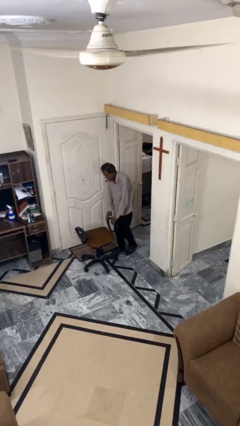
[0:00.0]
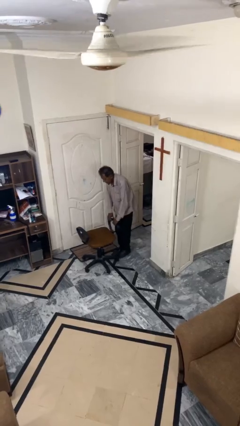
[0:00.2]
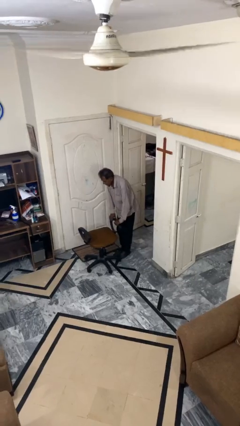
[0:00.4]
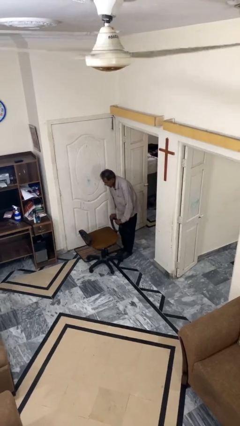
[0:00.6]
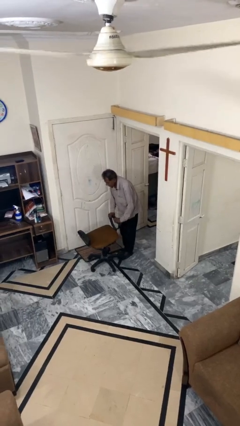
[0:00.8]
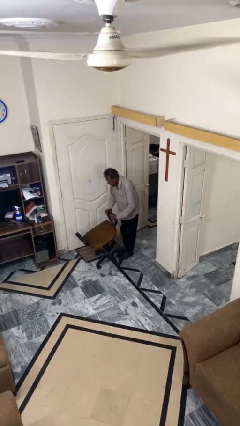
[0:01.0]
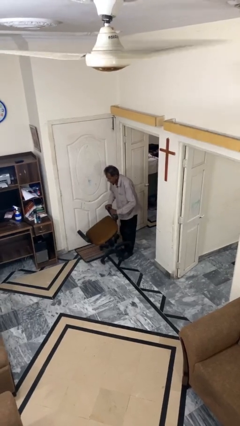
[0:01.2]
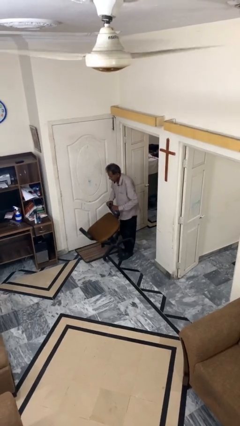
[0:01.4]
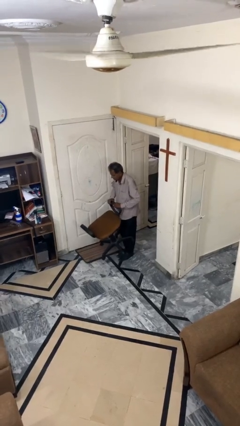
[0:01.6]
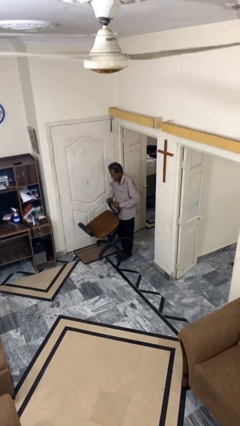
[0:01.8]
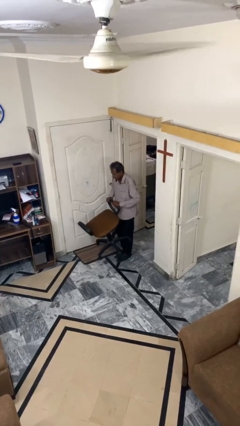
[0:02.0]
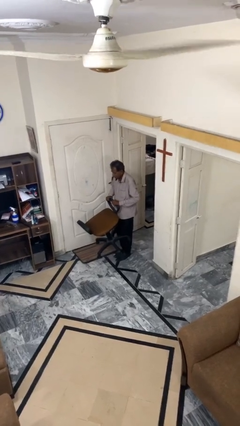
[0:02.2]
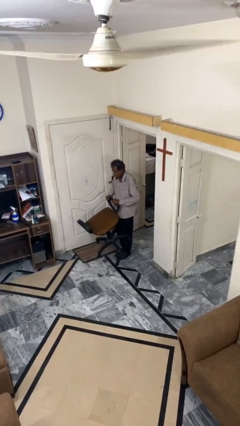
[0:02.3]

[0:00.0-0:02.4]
person picks up object from floor

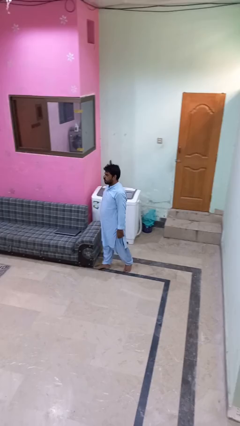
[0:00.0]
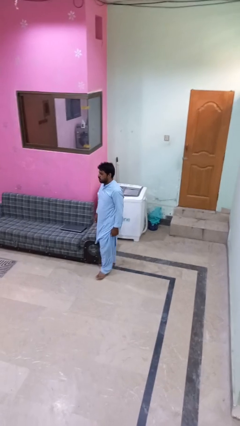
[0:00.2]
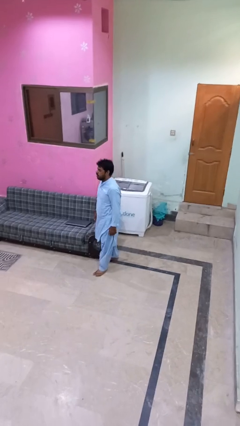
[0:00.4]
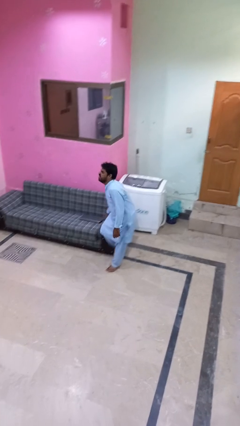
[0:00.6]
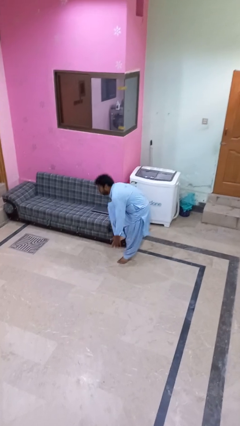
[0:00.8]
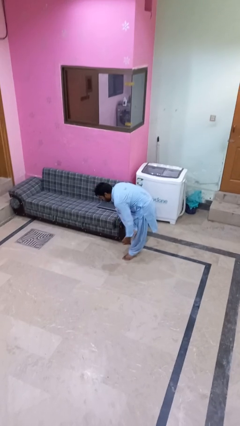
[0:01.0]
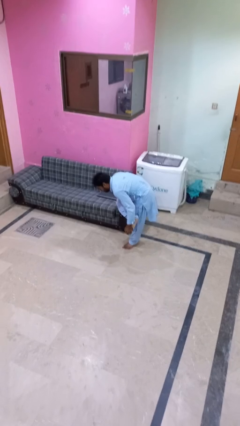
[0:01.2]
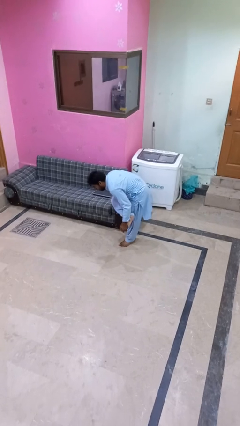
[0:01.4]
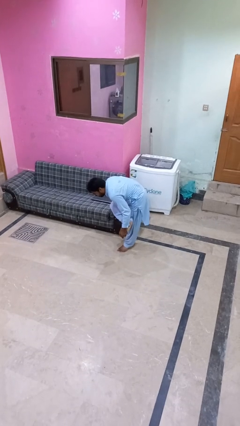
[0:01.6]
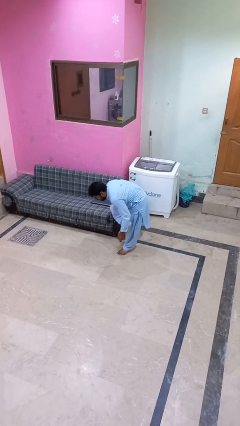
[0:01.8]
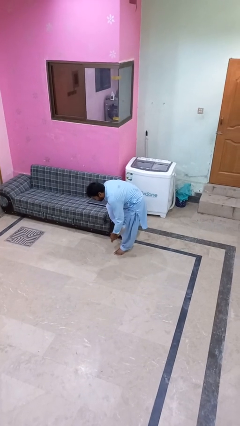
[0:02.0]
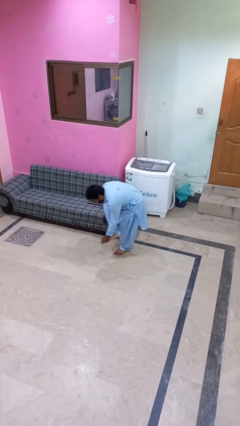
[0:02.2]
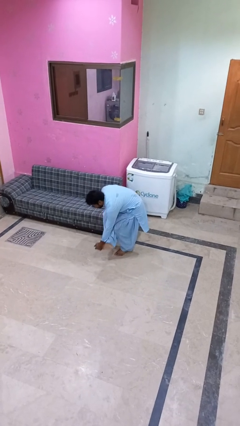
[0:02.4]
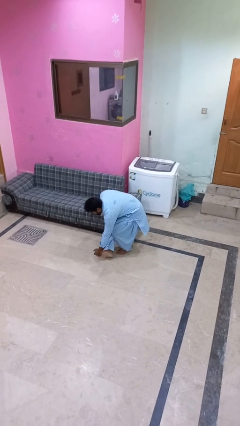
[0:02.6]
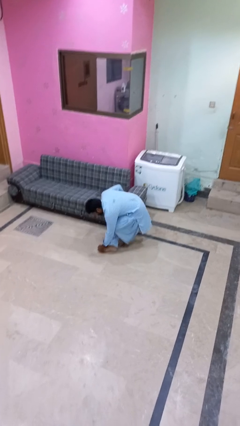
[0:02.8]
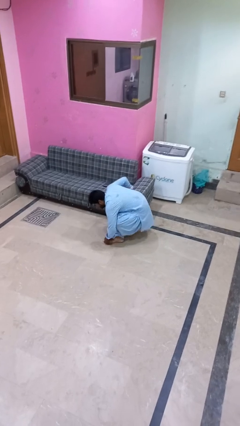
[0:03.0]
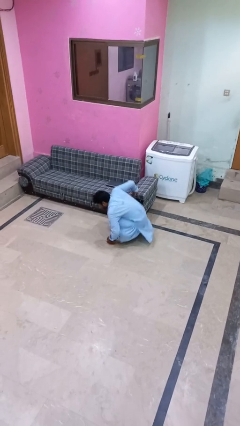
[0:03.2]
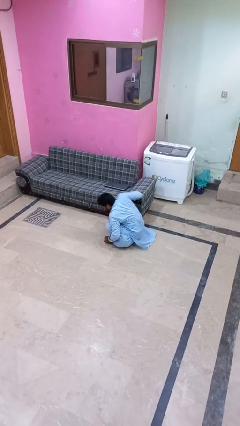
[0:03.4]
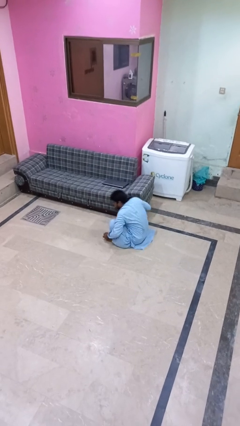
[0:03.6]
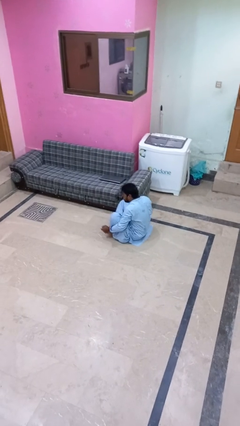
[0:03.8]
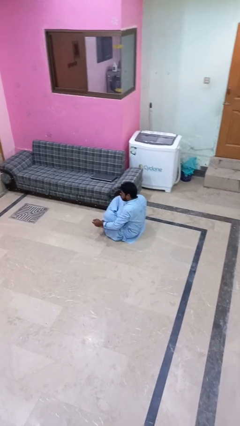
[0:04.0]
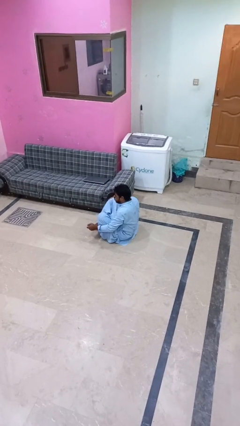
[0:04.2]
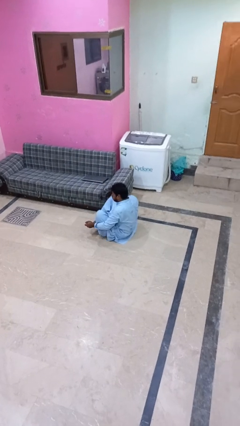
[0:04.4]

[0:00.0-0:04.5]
person trips on object on floor

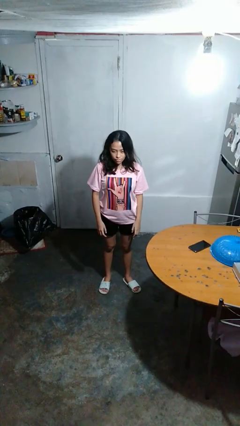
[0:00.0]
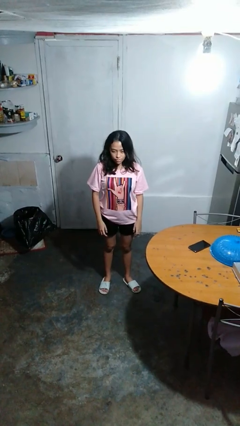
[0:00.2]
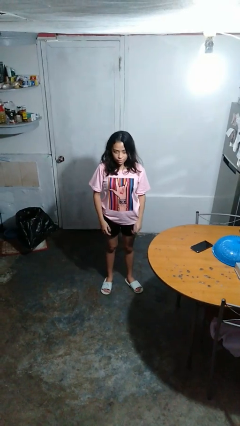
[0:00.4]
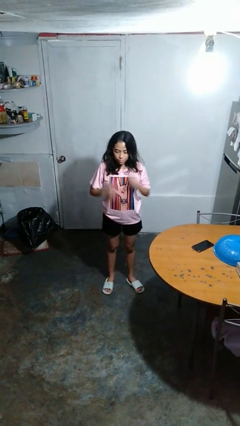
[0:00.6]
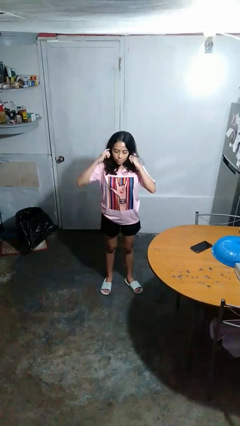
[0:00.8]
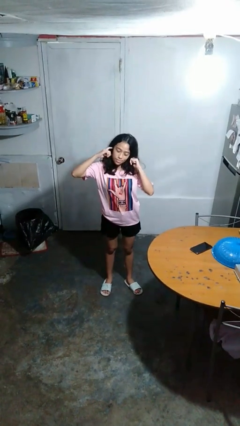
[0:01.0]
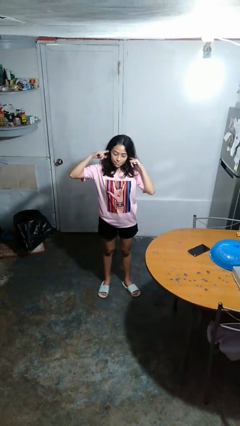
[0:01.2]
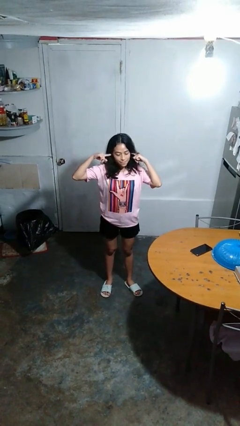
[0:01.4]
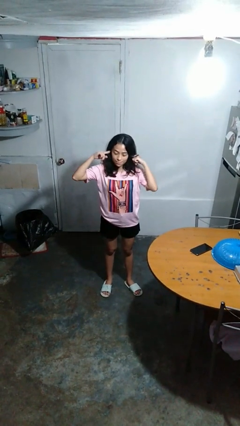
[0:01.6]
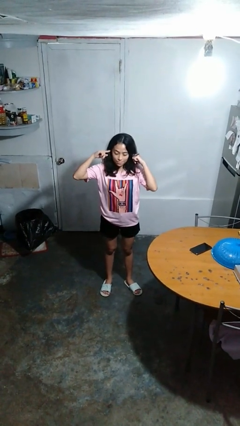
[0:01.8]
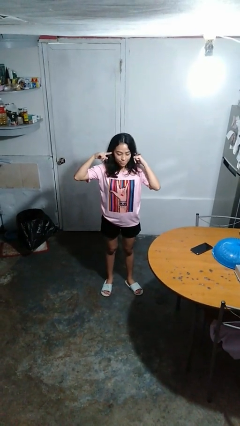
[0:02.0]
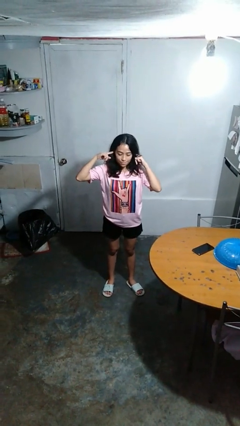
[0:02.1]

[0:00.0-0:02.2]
person puts fingers in ear

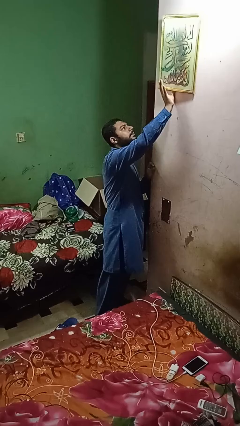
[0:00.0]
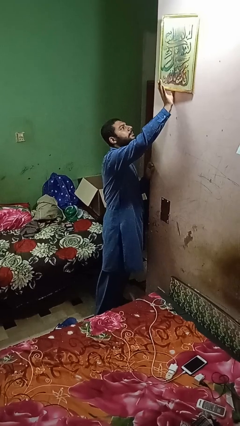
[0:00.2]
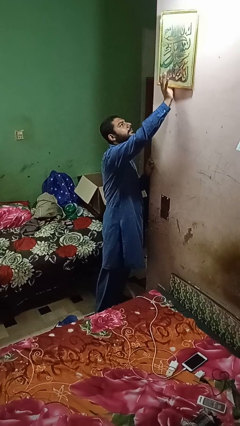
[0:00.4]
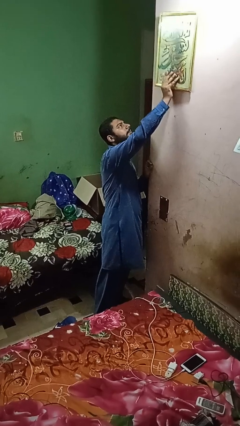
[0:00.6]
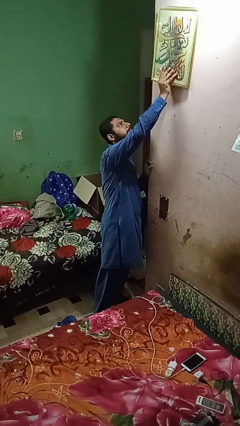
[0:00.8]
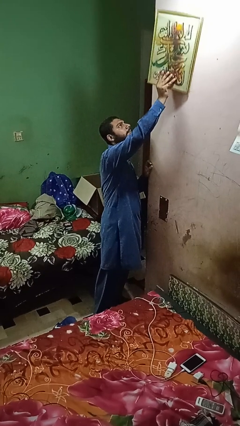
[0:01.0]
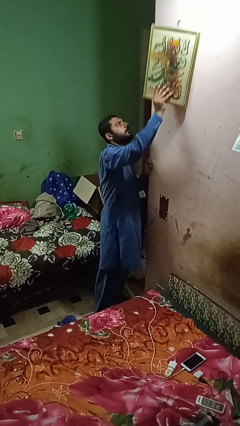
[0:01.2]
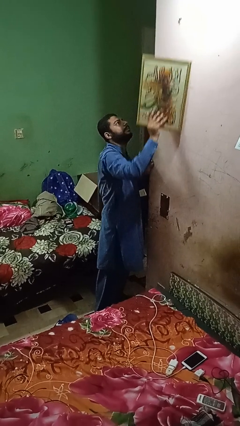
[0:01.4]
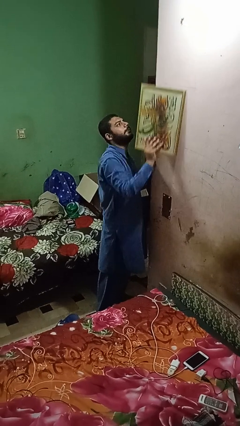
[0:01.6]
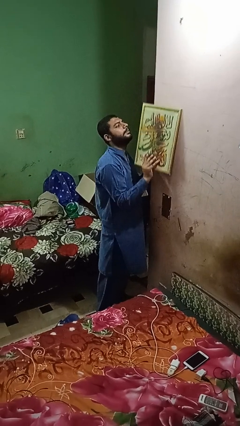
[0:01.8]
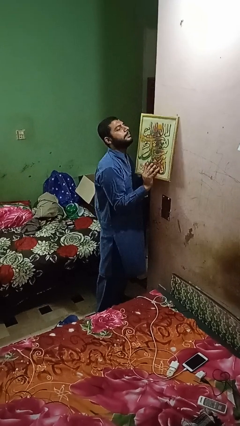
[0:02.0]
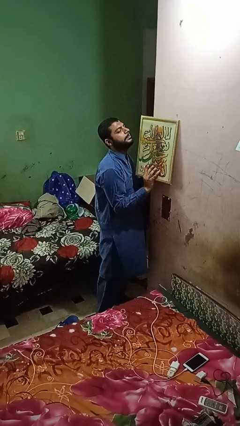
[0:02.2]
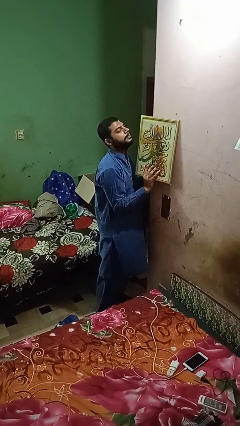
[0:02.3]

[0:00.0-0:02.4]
person takes down picture frame

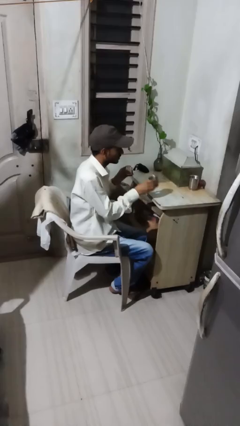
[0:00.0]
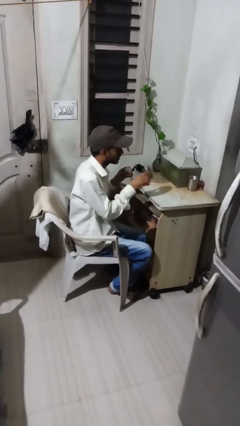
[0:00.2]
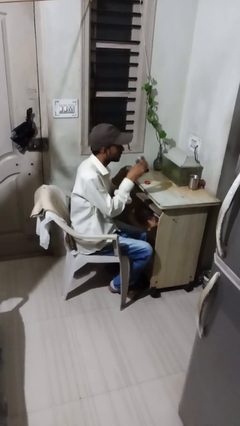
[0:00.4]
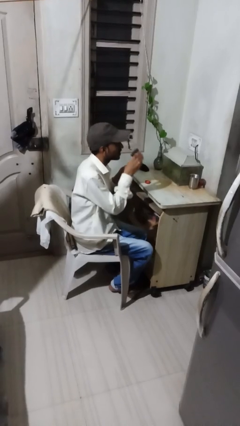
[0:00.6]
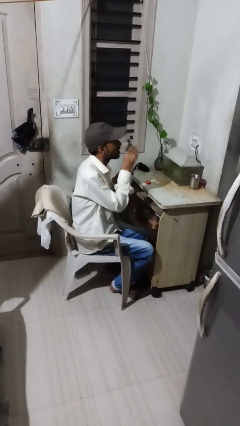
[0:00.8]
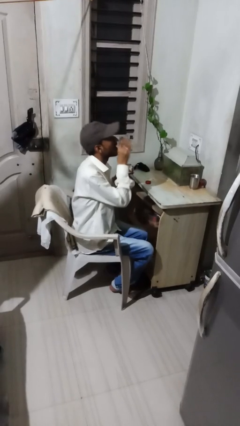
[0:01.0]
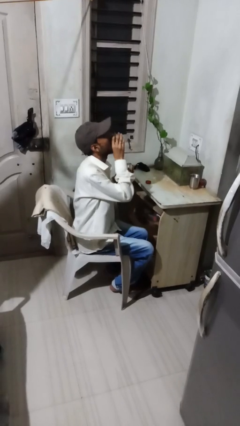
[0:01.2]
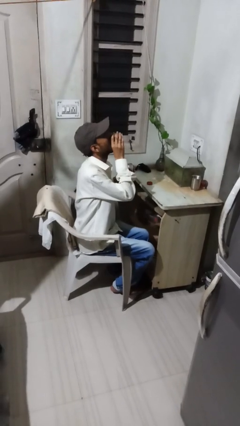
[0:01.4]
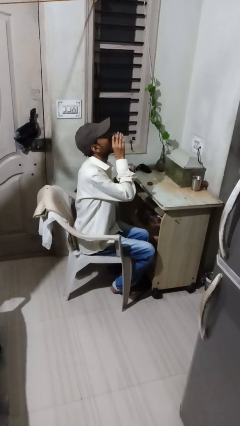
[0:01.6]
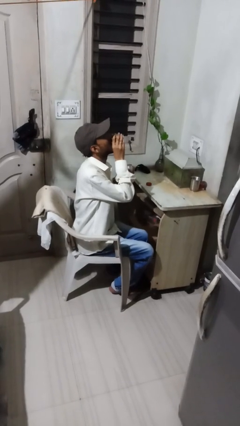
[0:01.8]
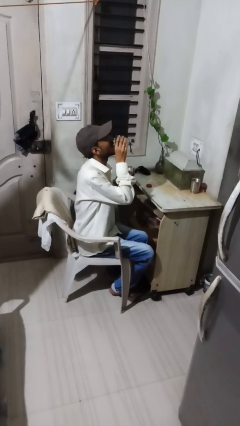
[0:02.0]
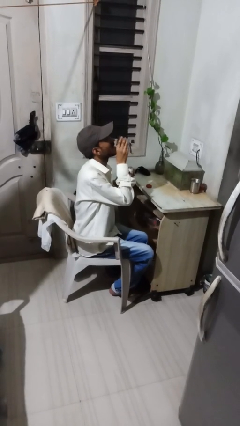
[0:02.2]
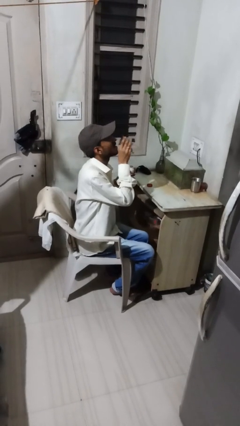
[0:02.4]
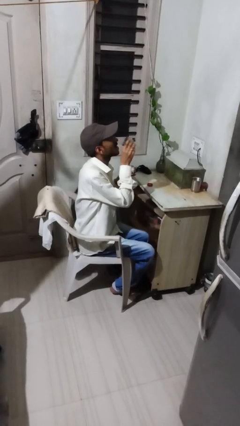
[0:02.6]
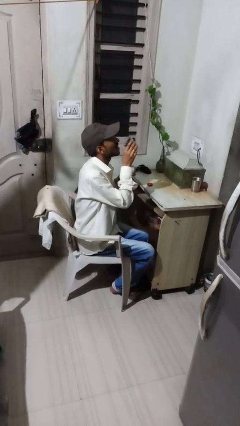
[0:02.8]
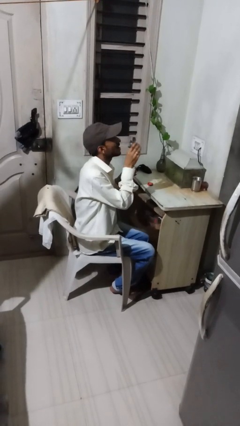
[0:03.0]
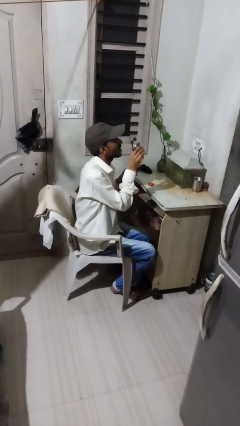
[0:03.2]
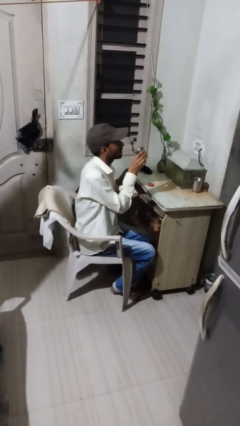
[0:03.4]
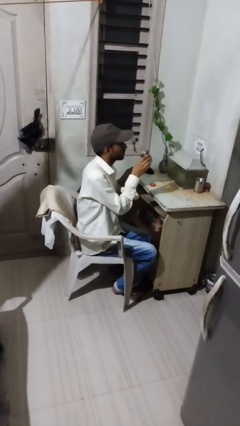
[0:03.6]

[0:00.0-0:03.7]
person drinks from cup

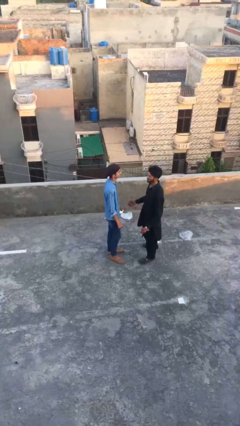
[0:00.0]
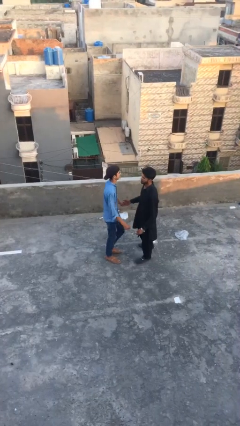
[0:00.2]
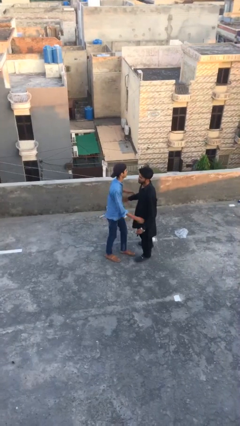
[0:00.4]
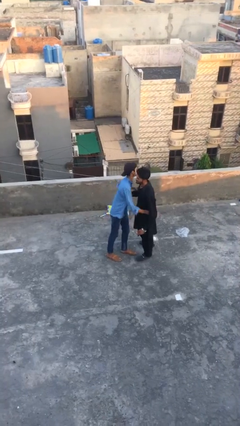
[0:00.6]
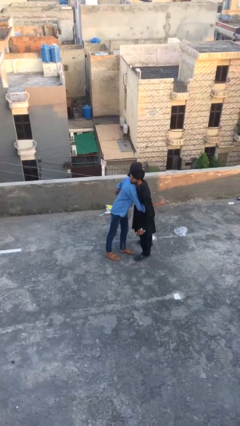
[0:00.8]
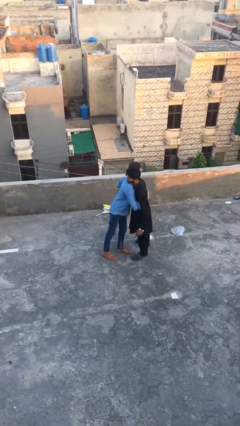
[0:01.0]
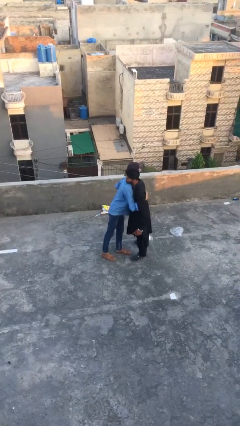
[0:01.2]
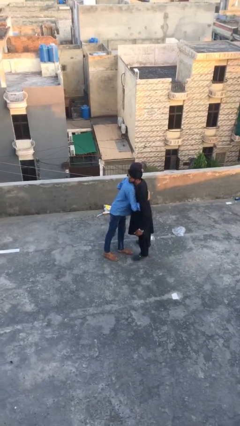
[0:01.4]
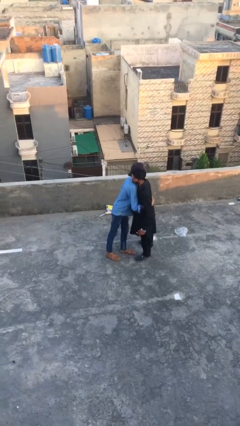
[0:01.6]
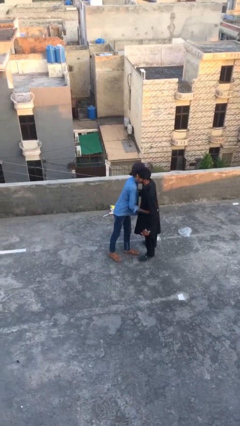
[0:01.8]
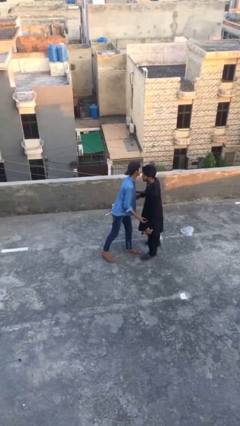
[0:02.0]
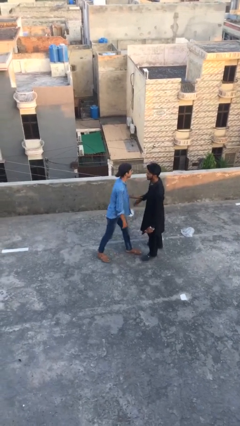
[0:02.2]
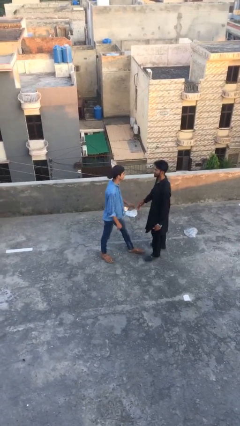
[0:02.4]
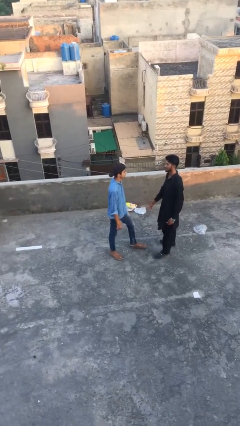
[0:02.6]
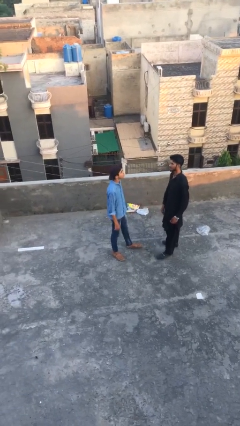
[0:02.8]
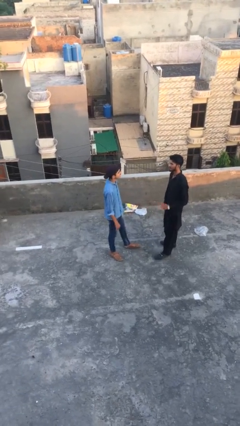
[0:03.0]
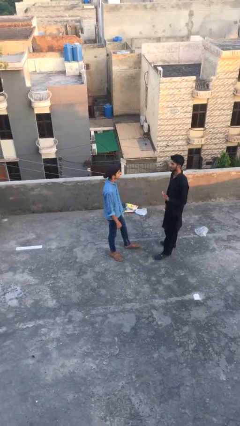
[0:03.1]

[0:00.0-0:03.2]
person embraces person
